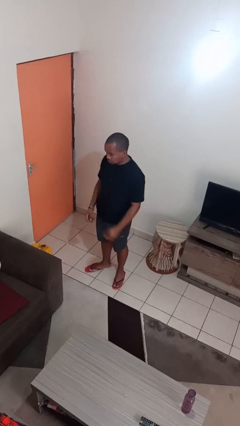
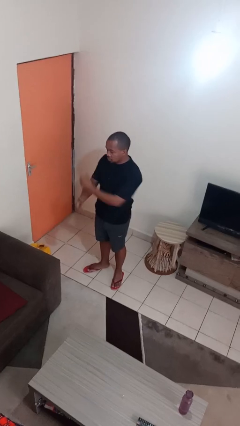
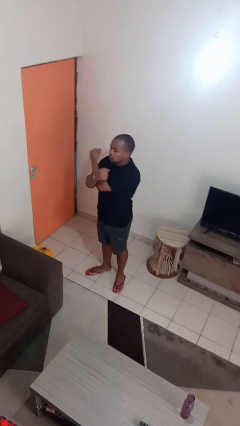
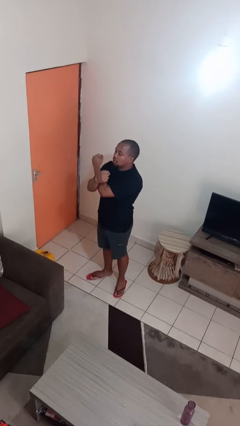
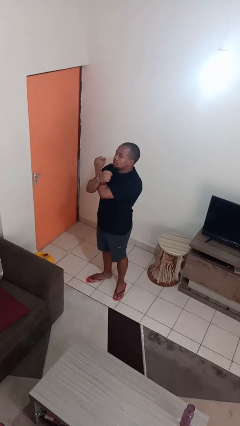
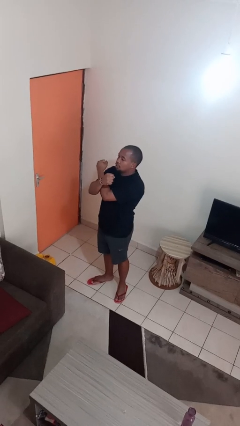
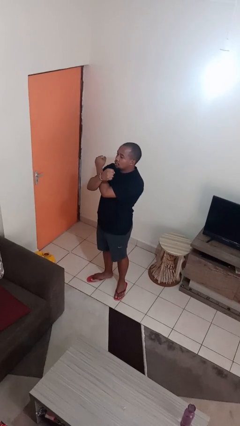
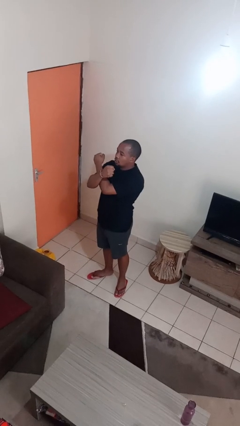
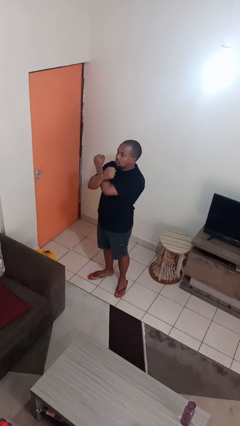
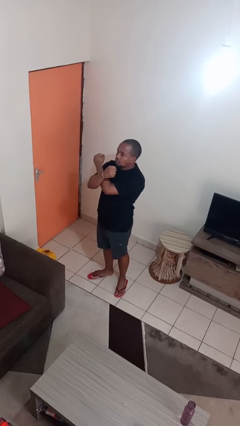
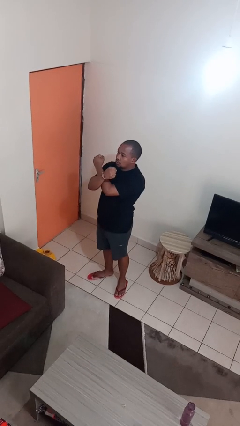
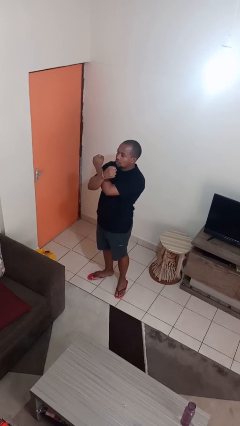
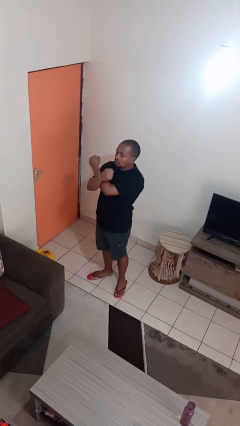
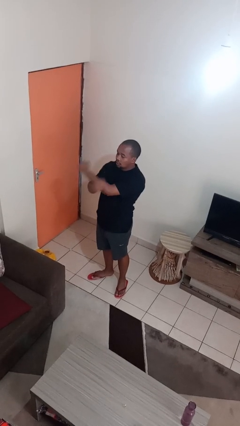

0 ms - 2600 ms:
person gestures arms x

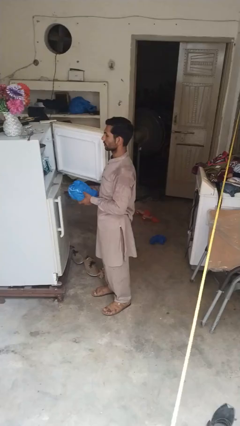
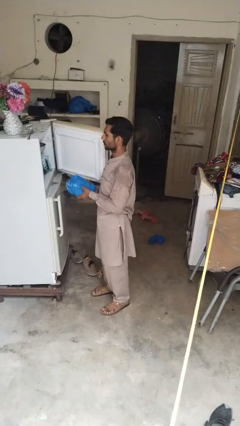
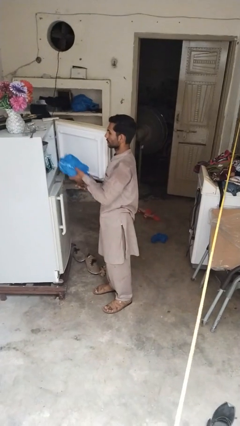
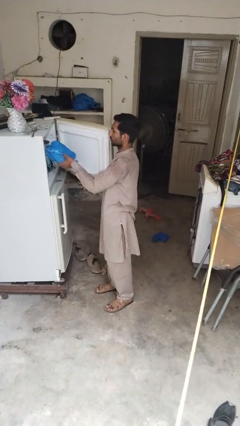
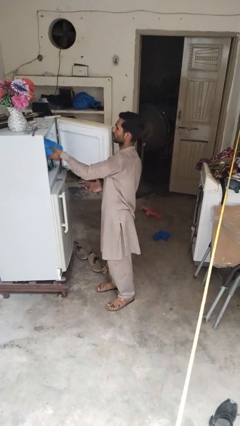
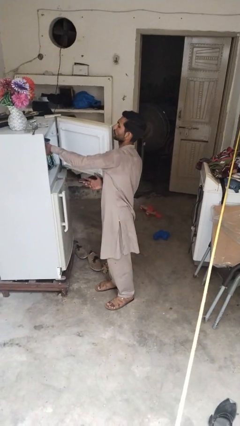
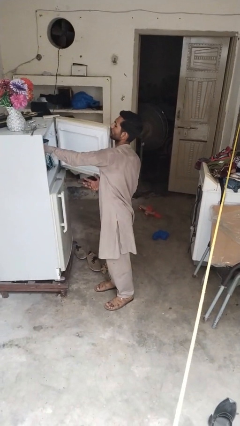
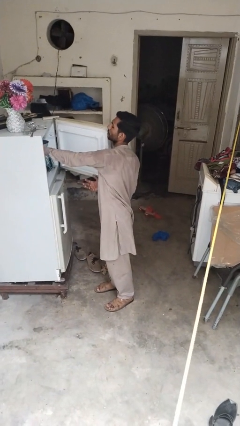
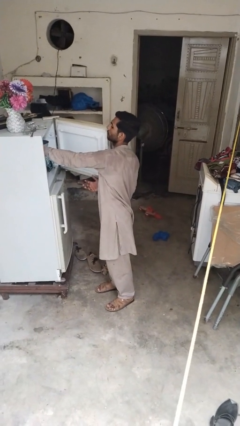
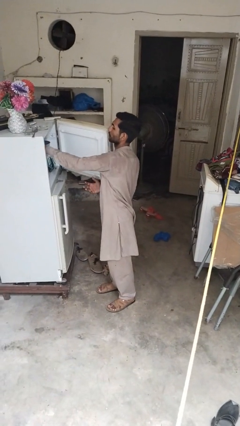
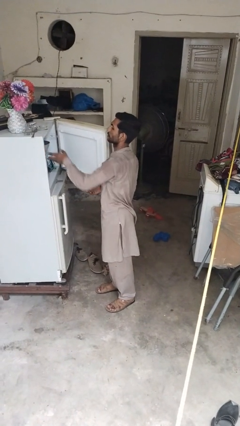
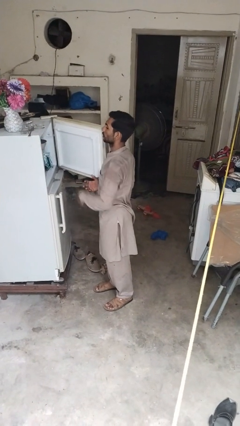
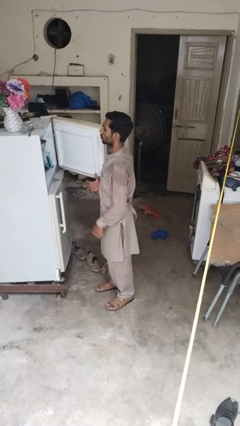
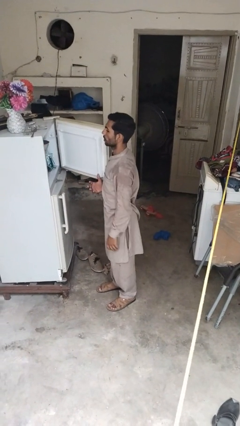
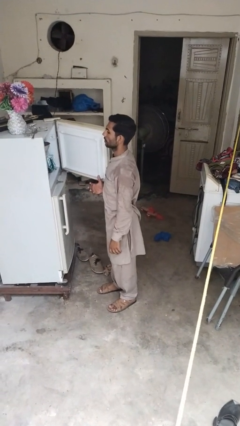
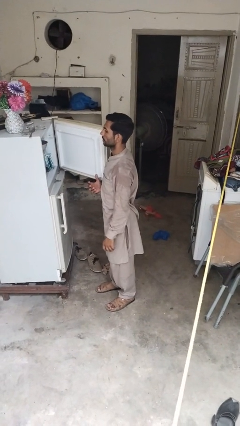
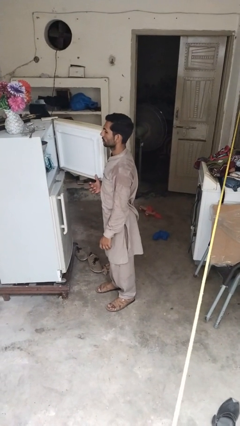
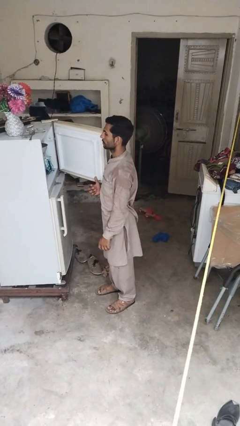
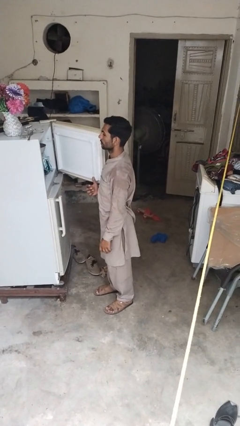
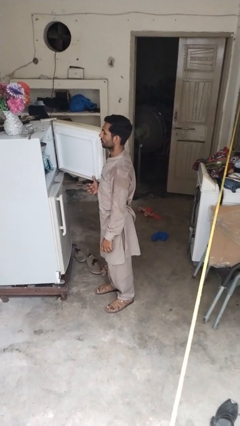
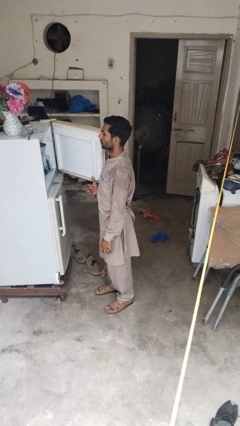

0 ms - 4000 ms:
person loads groceries into refrigerator

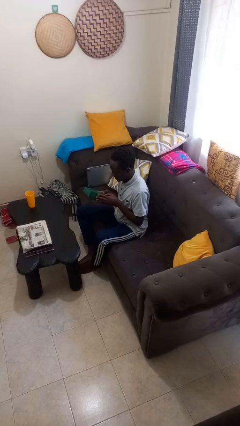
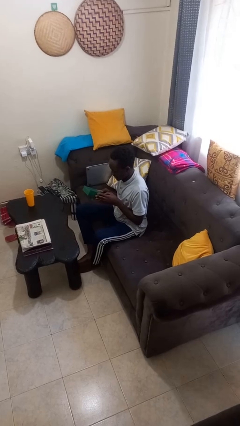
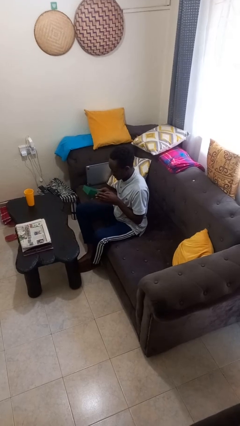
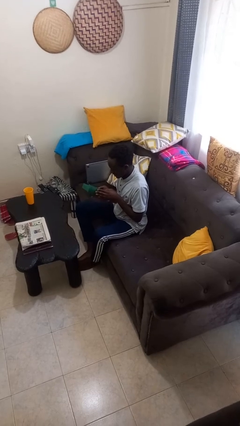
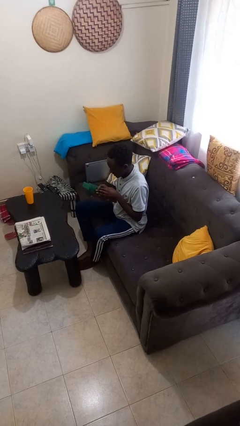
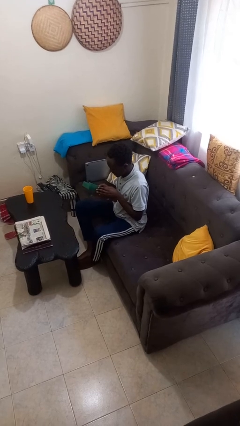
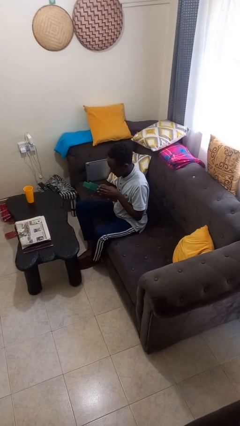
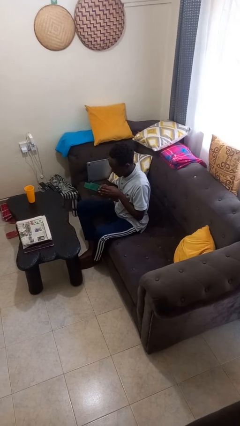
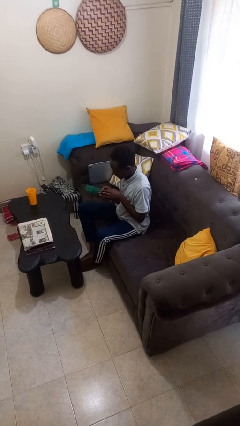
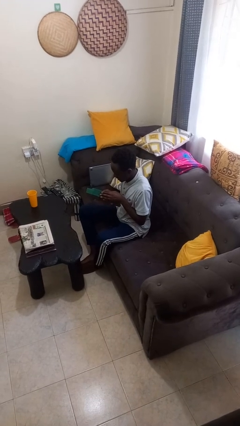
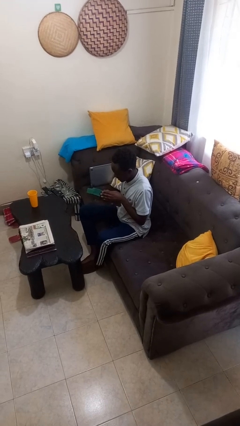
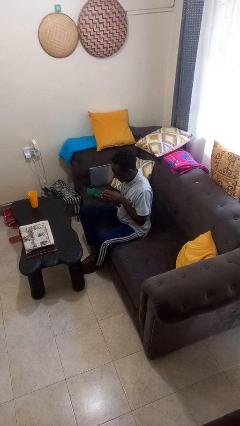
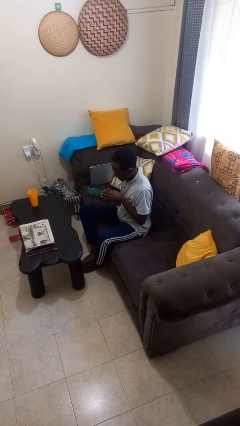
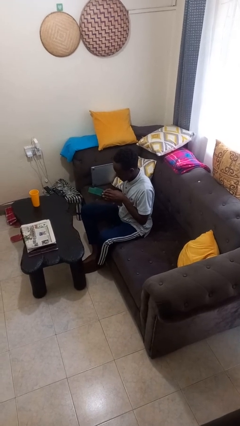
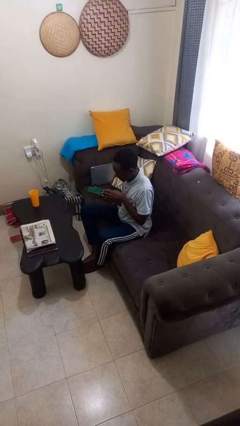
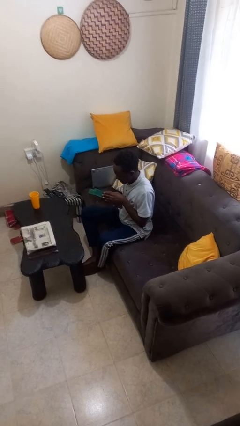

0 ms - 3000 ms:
person interacts with handheld game

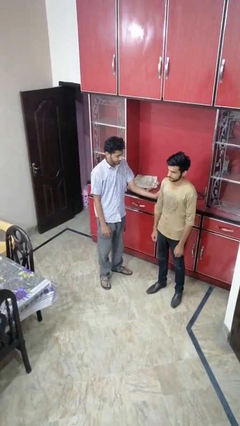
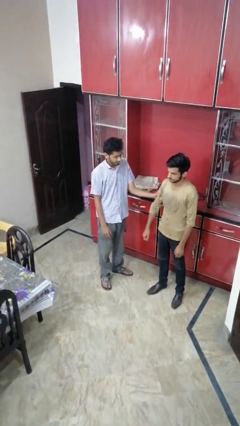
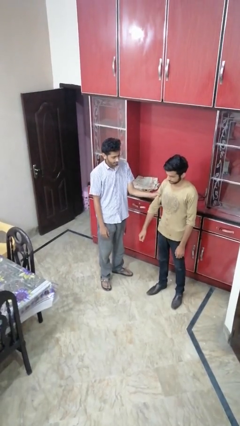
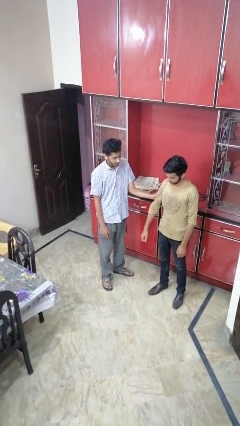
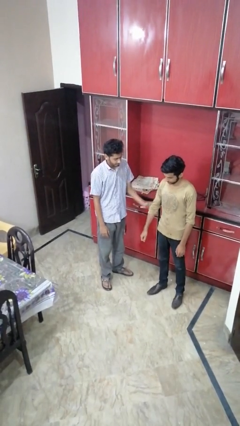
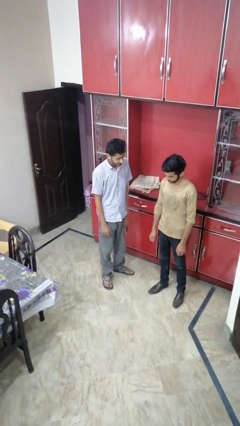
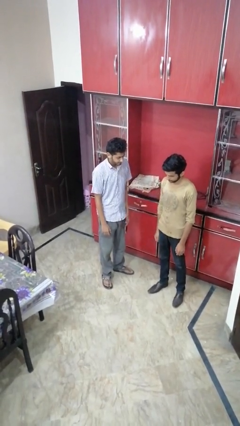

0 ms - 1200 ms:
person grabs person by bicep

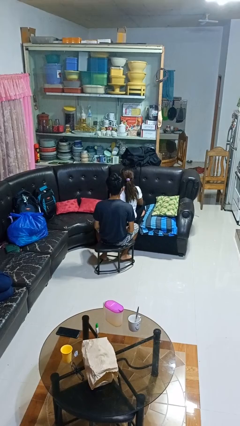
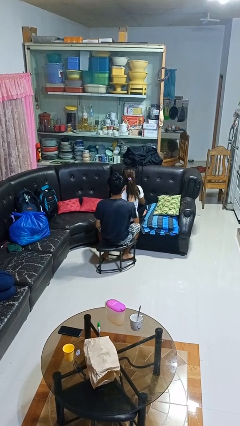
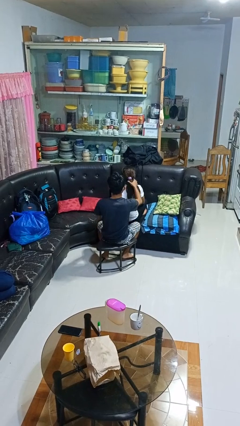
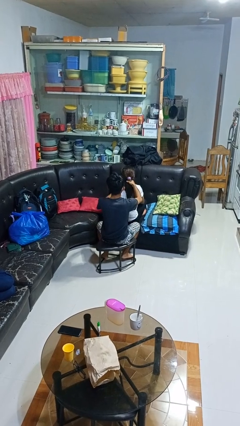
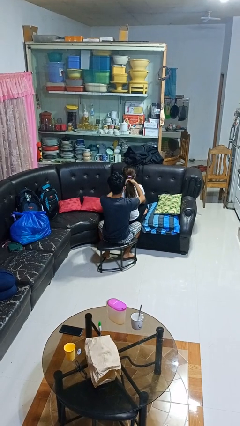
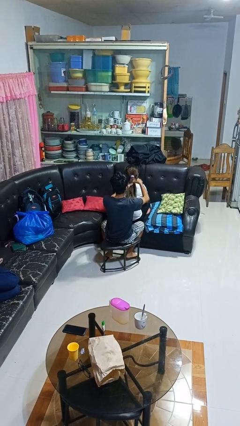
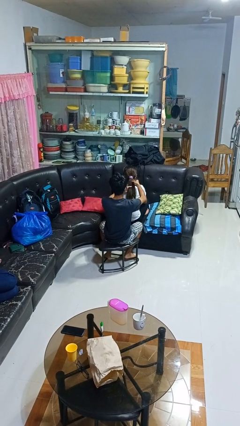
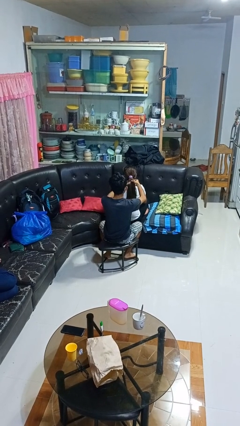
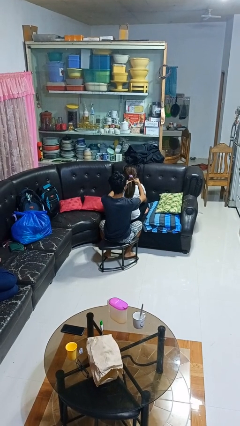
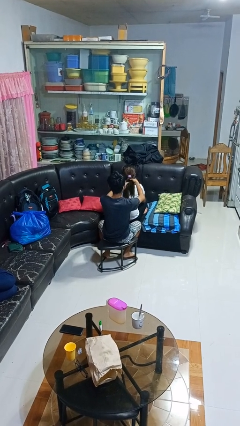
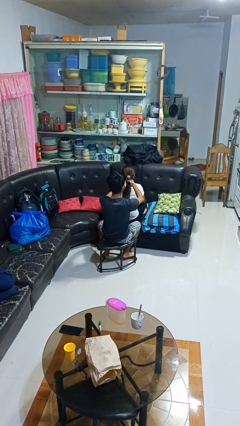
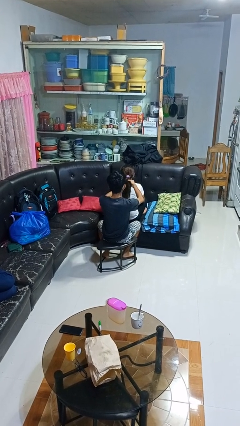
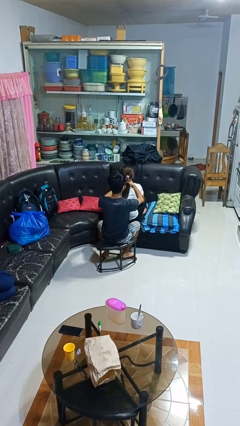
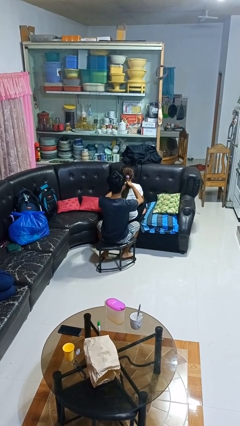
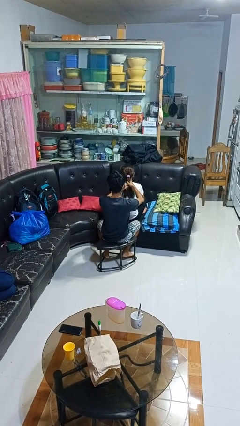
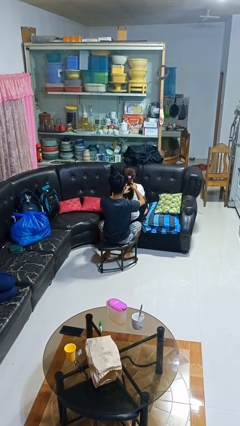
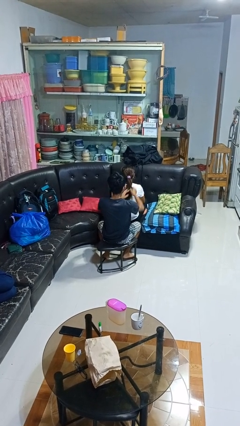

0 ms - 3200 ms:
person braids hair of person

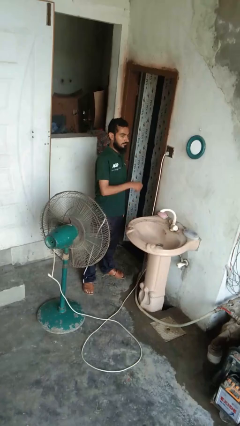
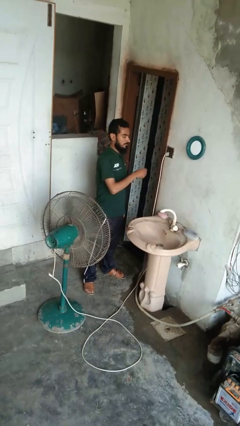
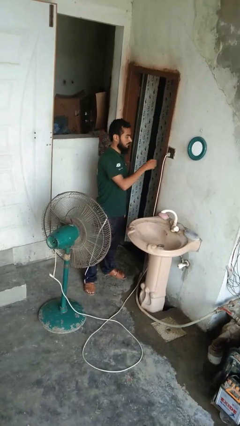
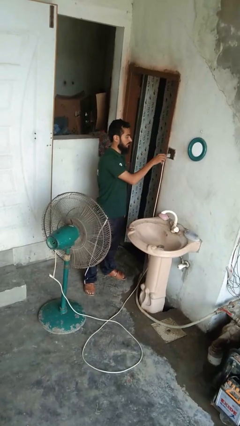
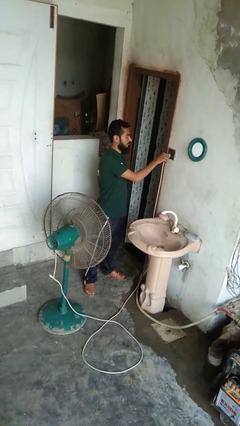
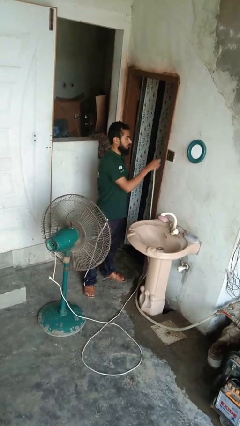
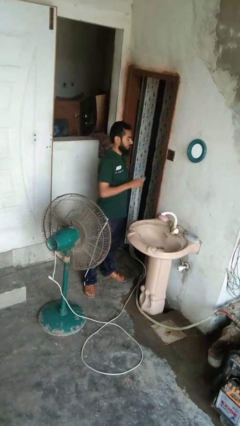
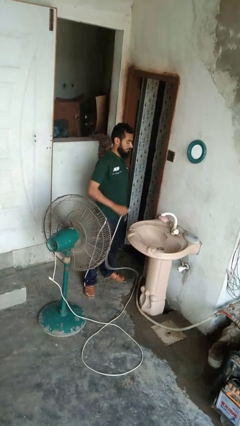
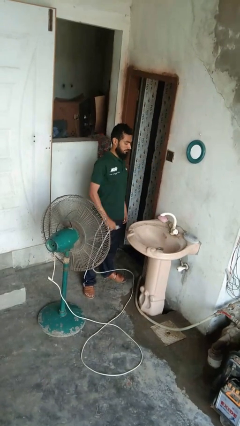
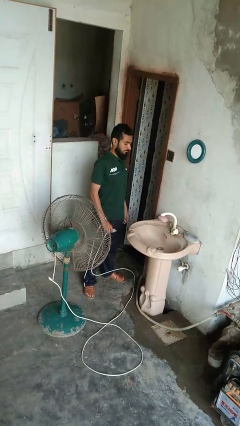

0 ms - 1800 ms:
person turns off fan

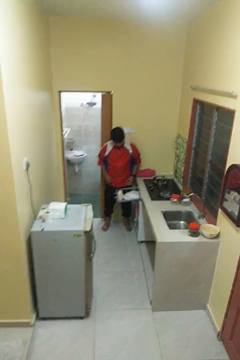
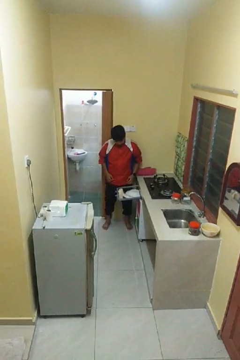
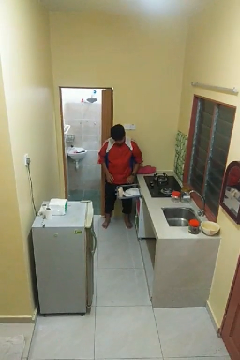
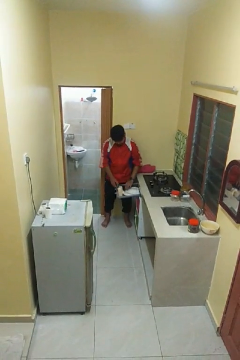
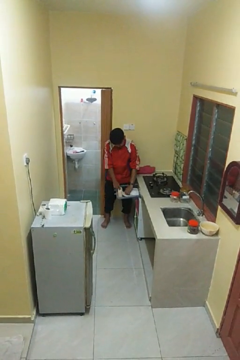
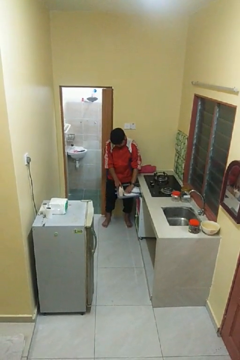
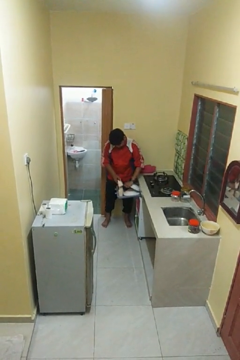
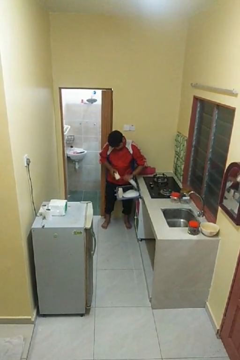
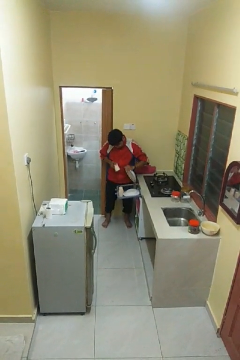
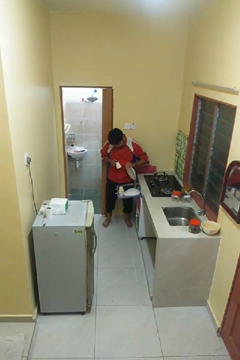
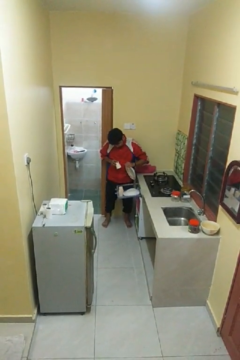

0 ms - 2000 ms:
person takes object from kitchen drawer
